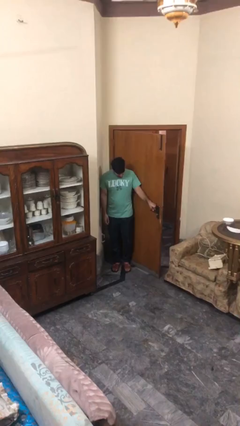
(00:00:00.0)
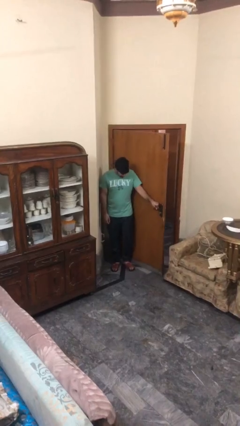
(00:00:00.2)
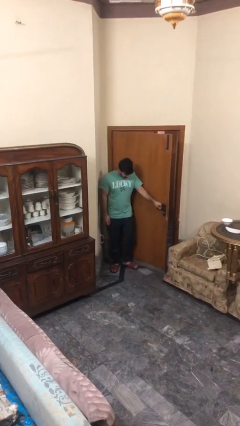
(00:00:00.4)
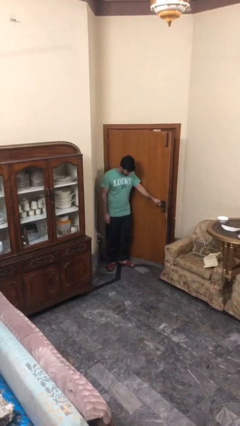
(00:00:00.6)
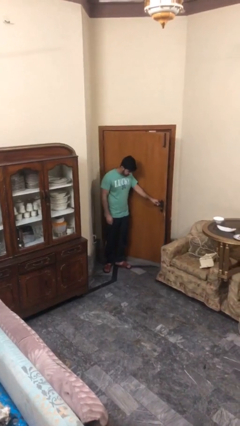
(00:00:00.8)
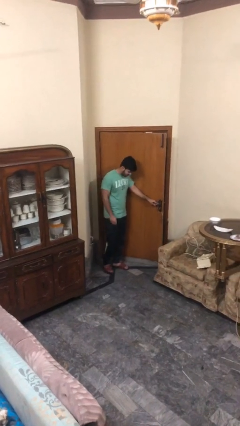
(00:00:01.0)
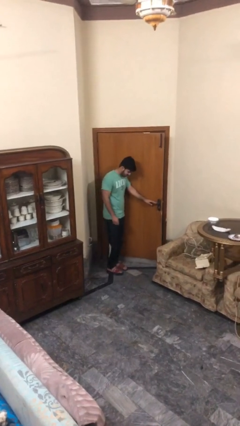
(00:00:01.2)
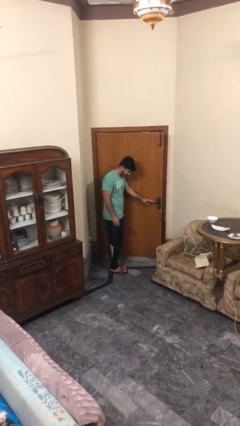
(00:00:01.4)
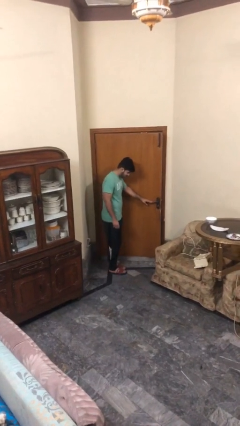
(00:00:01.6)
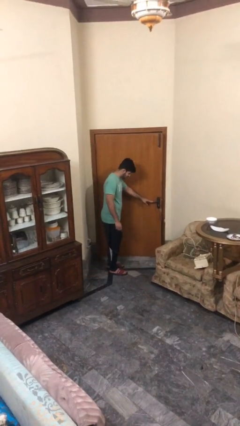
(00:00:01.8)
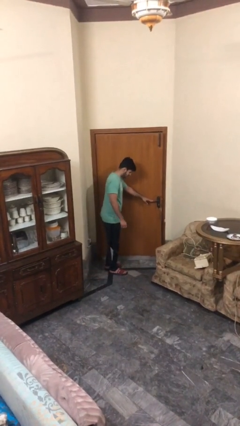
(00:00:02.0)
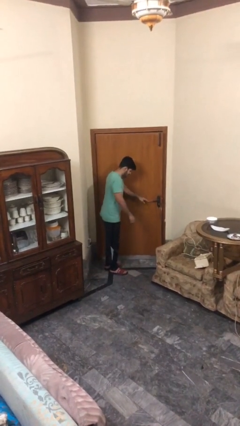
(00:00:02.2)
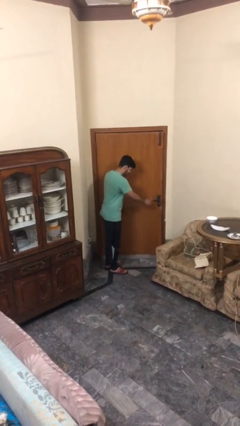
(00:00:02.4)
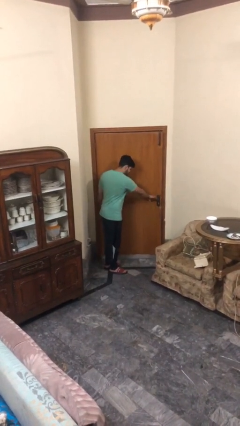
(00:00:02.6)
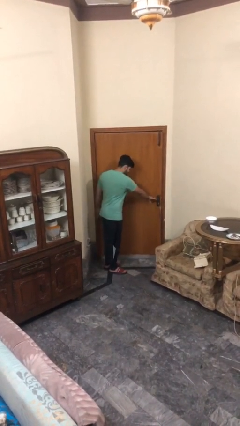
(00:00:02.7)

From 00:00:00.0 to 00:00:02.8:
person closes facility door

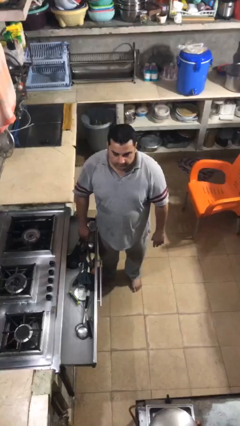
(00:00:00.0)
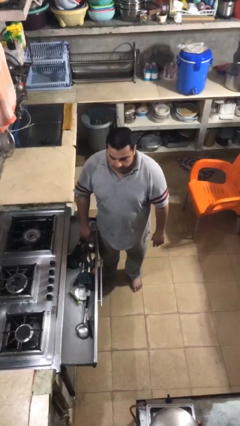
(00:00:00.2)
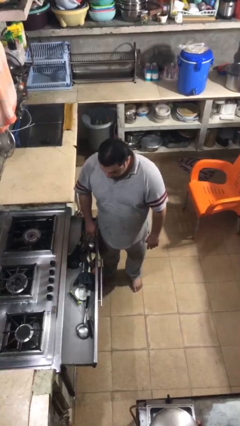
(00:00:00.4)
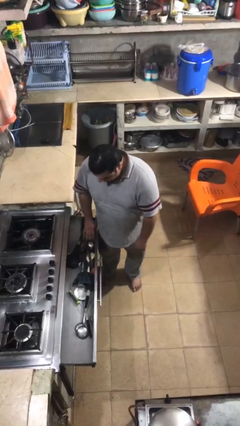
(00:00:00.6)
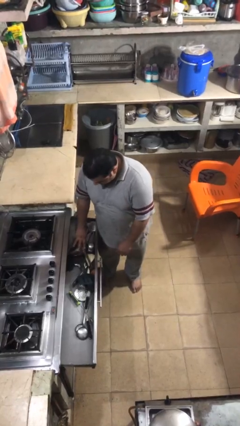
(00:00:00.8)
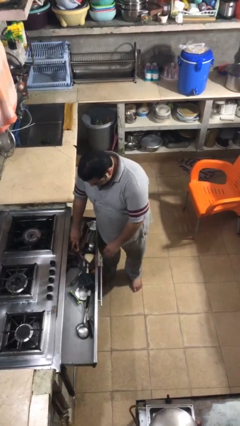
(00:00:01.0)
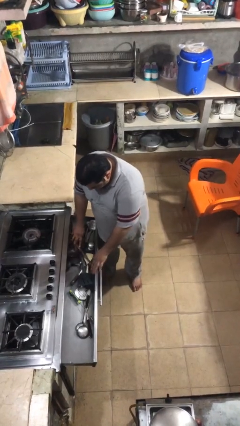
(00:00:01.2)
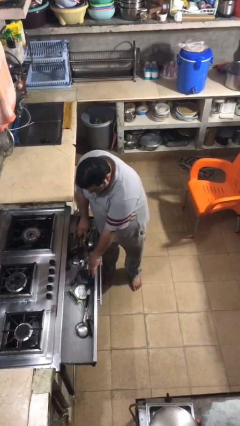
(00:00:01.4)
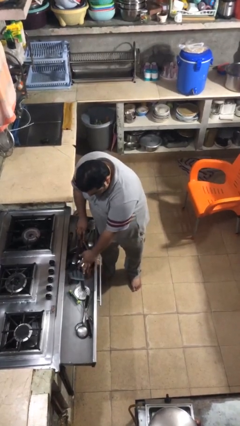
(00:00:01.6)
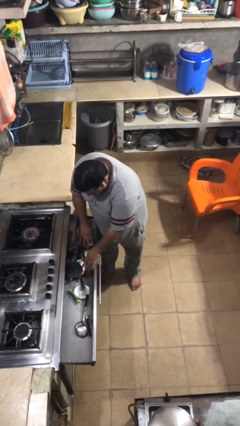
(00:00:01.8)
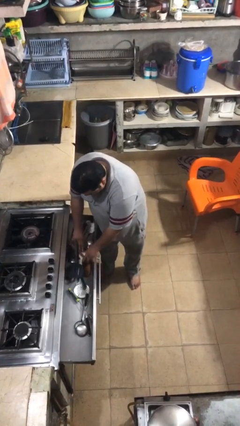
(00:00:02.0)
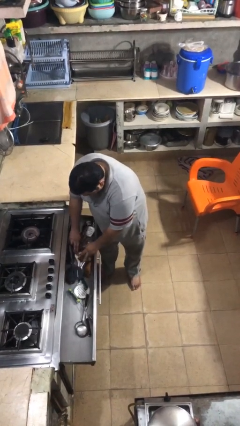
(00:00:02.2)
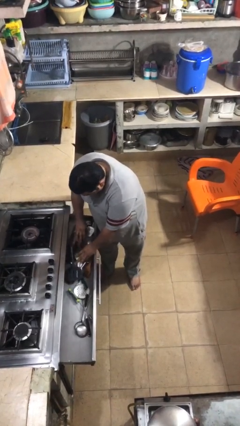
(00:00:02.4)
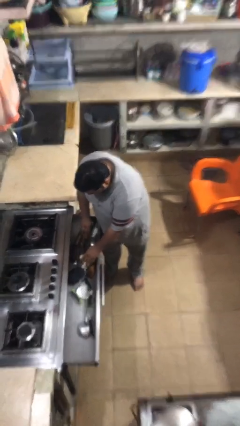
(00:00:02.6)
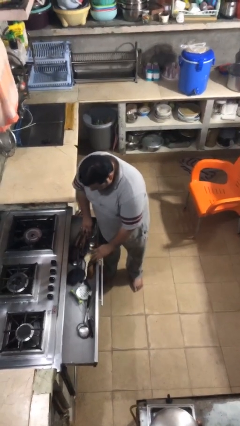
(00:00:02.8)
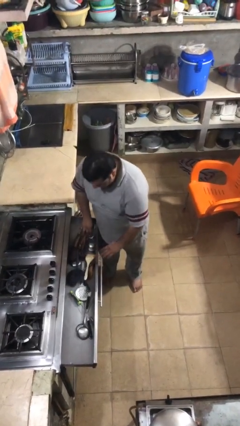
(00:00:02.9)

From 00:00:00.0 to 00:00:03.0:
person searches in kitchen drawer

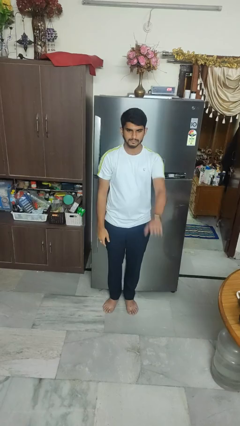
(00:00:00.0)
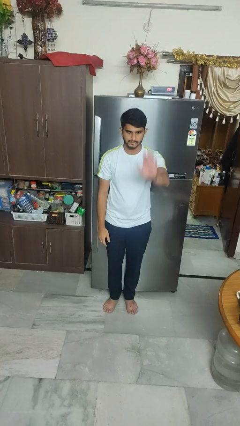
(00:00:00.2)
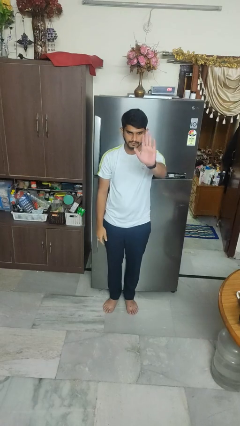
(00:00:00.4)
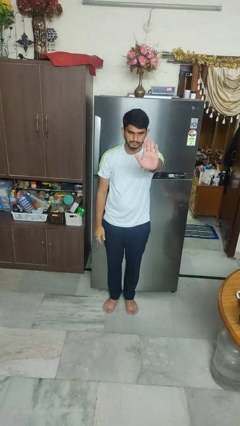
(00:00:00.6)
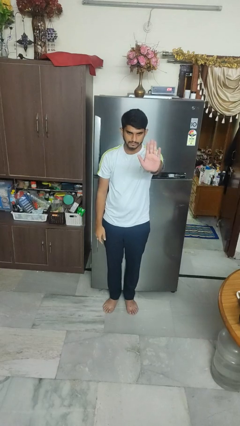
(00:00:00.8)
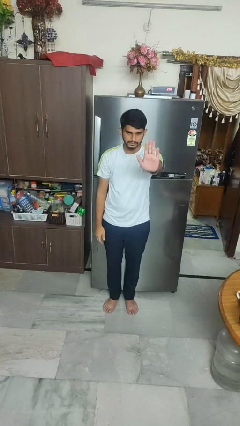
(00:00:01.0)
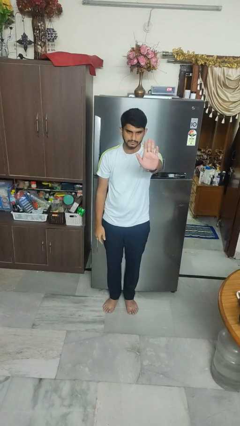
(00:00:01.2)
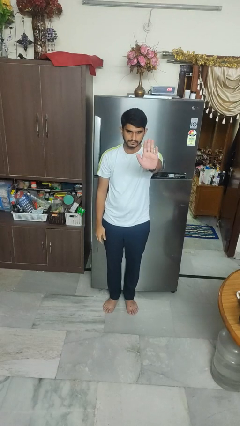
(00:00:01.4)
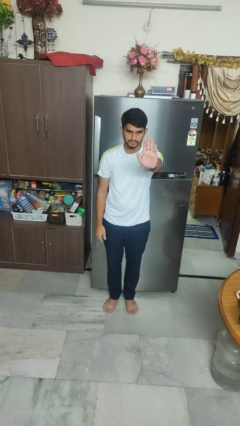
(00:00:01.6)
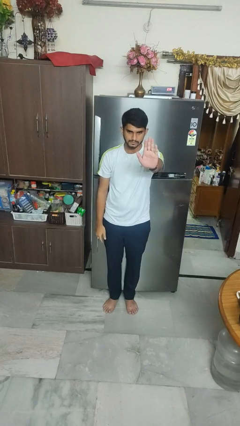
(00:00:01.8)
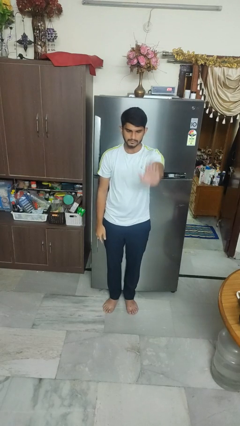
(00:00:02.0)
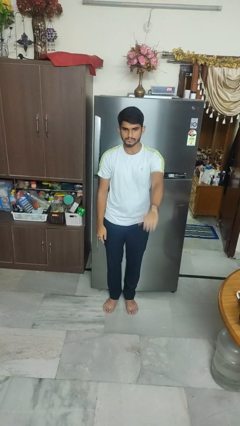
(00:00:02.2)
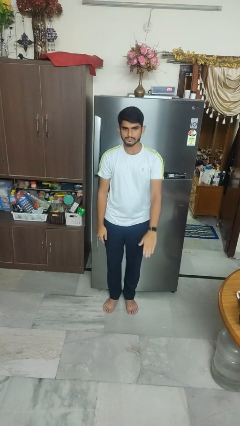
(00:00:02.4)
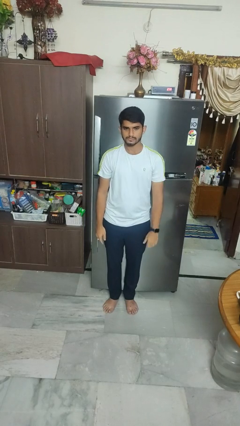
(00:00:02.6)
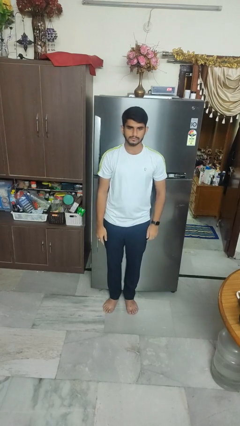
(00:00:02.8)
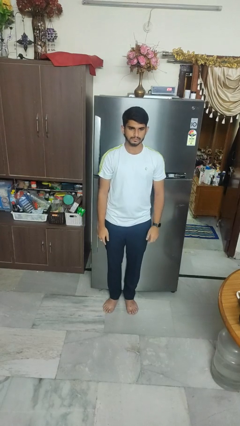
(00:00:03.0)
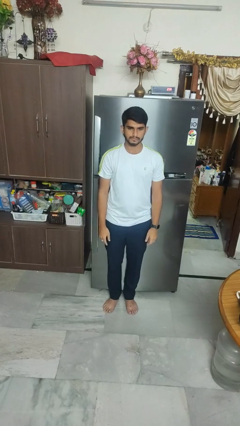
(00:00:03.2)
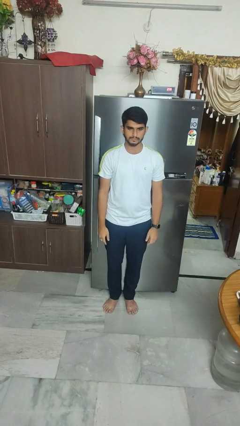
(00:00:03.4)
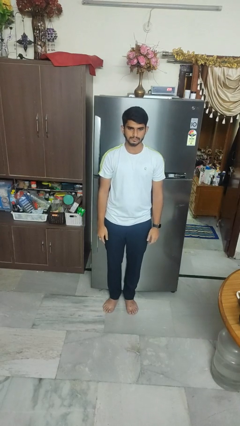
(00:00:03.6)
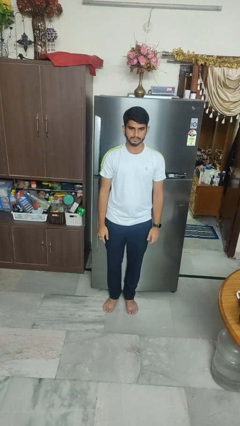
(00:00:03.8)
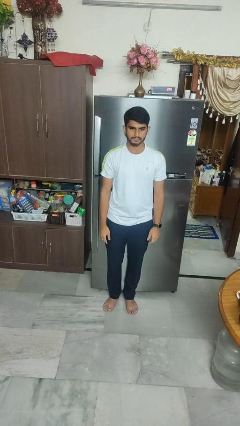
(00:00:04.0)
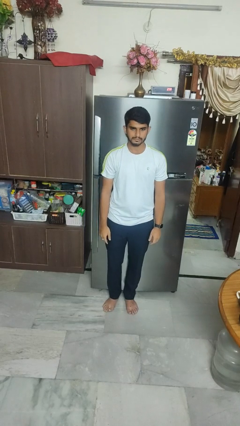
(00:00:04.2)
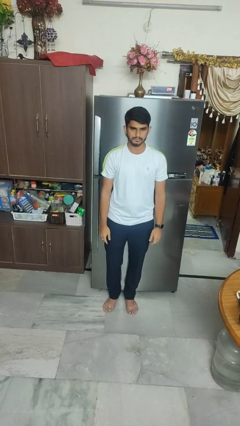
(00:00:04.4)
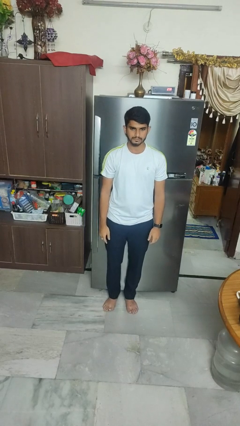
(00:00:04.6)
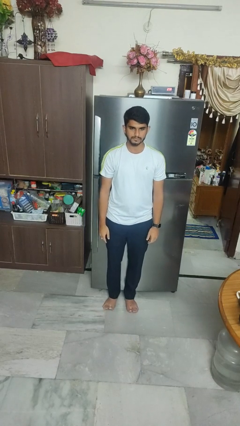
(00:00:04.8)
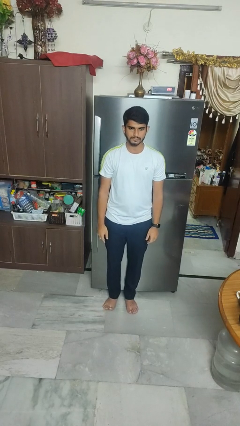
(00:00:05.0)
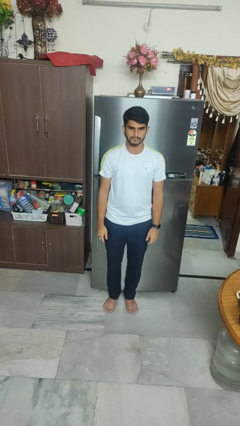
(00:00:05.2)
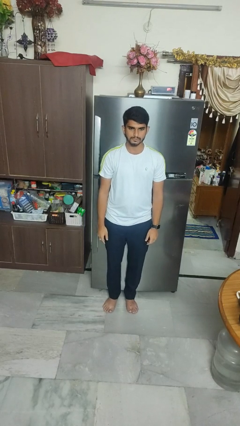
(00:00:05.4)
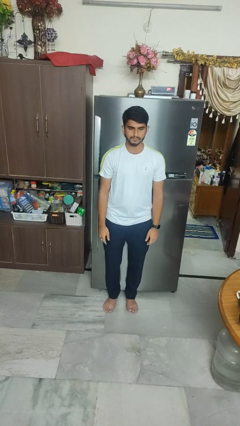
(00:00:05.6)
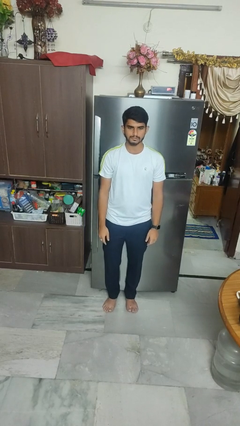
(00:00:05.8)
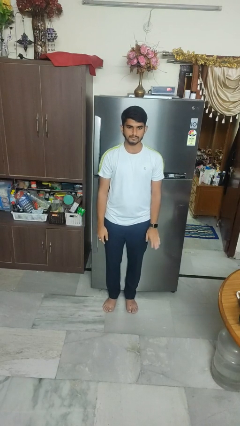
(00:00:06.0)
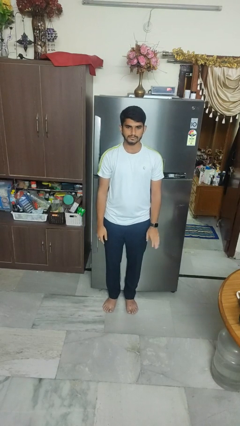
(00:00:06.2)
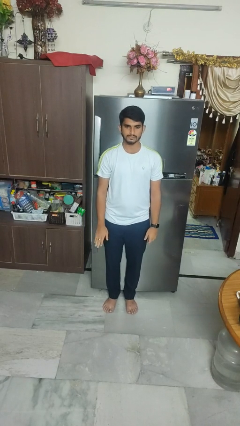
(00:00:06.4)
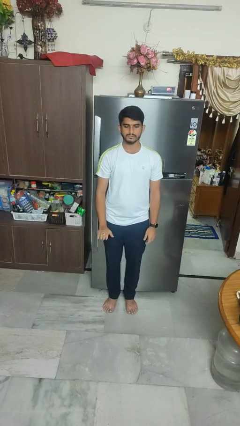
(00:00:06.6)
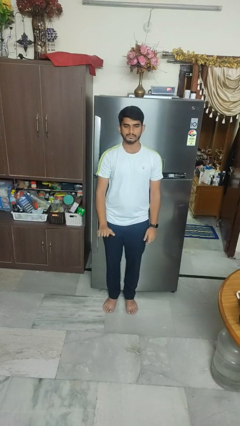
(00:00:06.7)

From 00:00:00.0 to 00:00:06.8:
person gestures stop

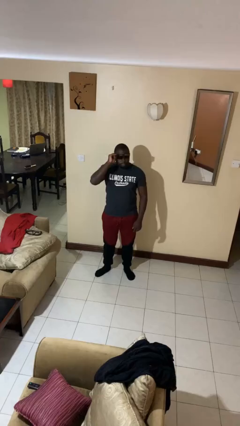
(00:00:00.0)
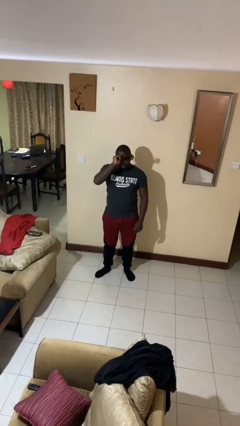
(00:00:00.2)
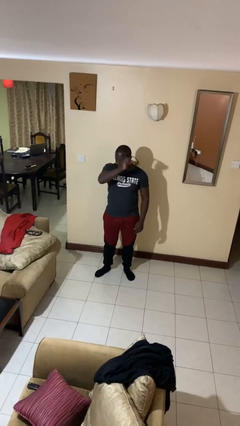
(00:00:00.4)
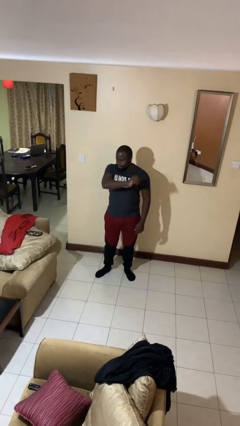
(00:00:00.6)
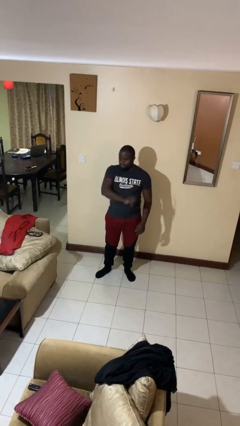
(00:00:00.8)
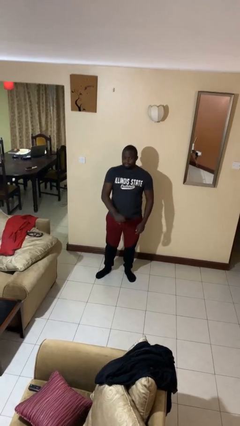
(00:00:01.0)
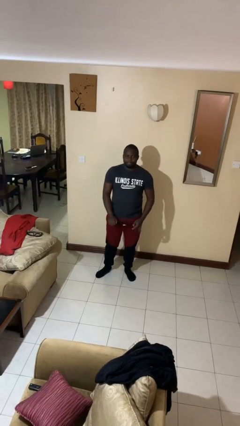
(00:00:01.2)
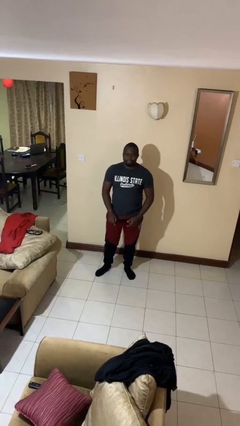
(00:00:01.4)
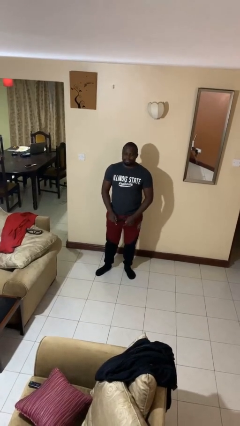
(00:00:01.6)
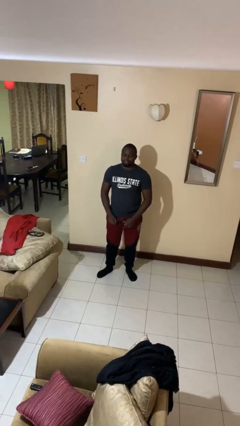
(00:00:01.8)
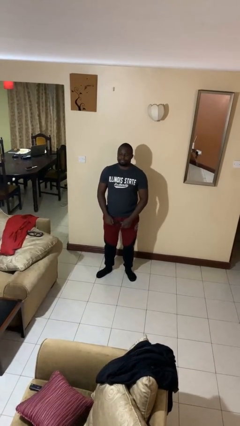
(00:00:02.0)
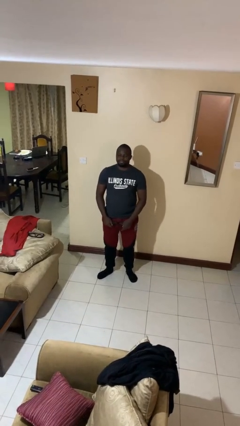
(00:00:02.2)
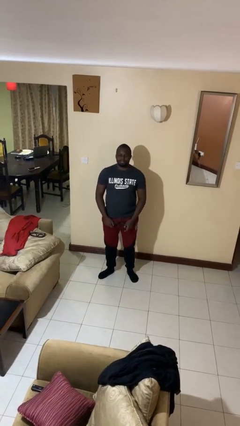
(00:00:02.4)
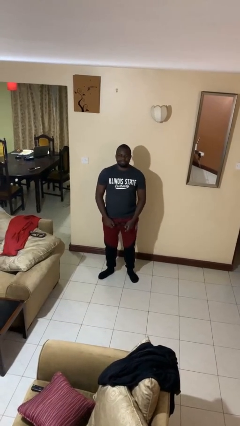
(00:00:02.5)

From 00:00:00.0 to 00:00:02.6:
person takes off sunglasses

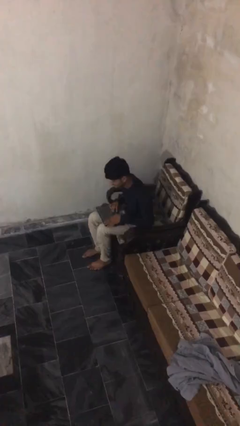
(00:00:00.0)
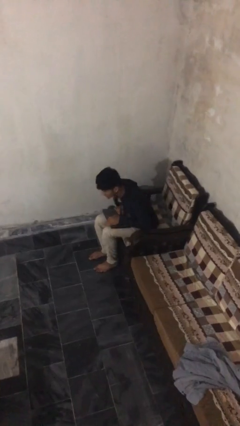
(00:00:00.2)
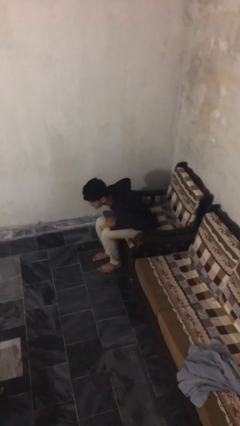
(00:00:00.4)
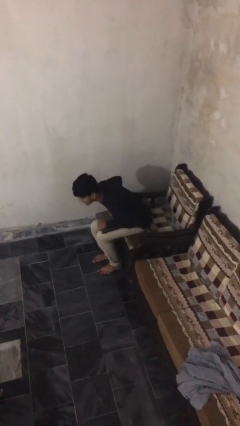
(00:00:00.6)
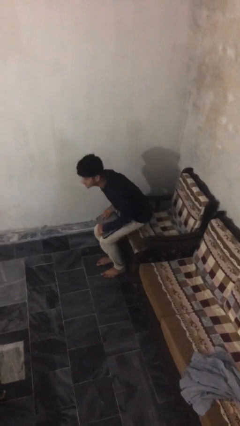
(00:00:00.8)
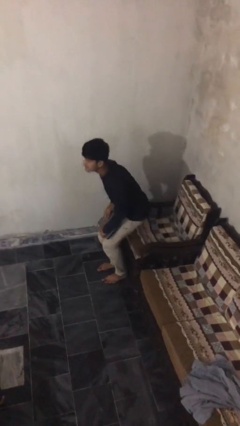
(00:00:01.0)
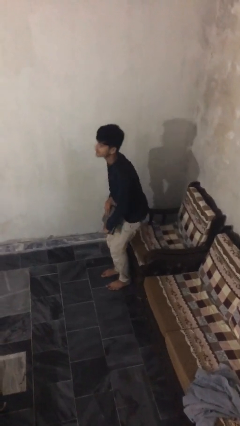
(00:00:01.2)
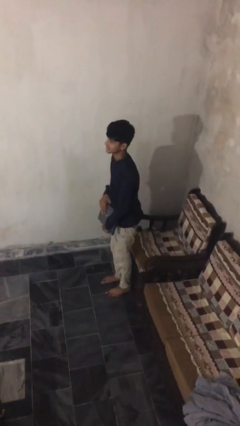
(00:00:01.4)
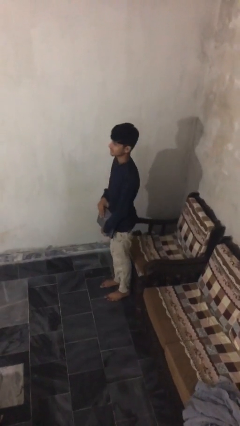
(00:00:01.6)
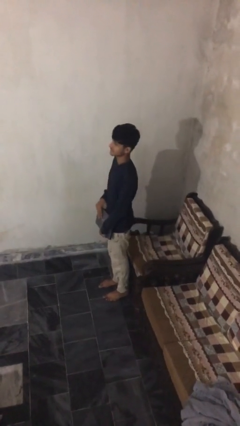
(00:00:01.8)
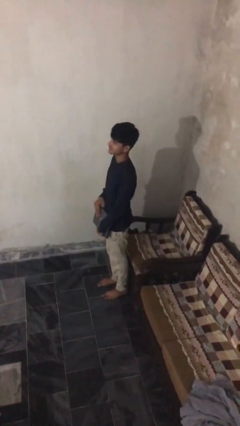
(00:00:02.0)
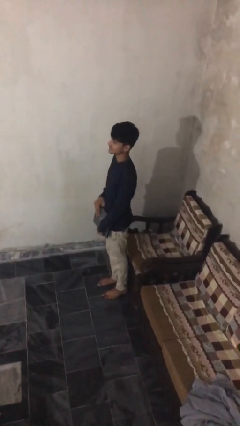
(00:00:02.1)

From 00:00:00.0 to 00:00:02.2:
person stands up
